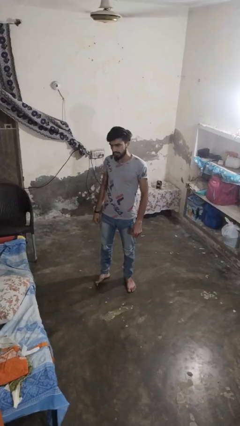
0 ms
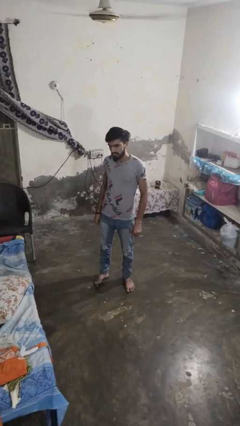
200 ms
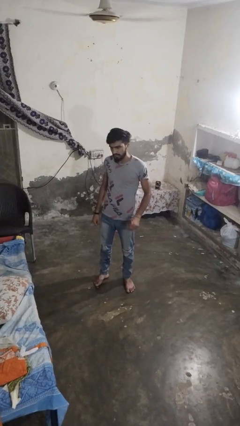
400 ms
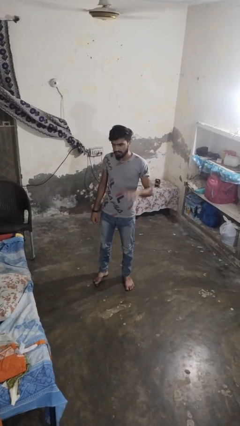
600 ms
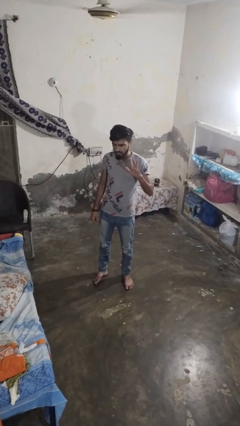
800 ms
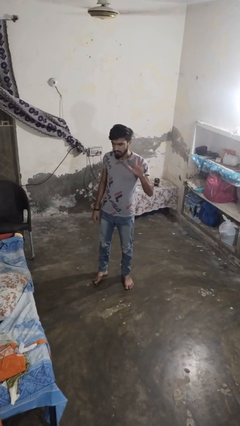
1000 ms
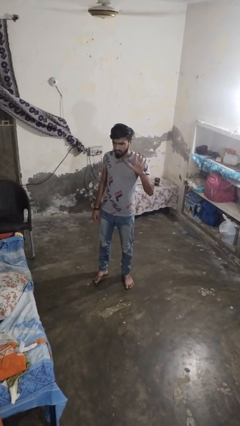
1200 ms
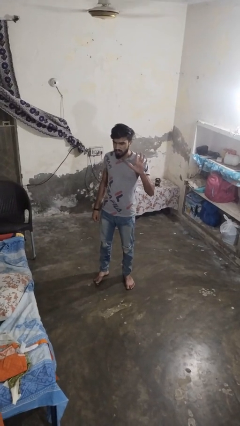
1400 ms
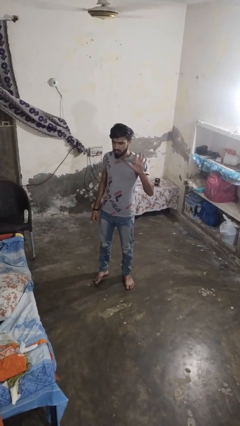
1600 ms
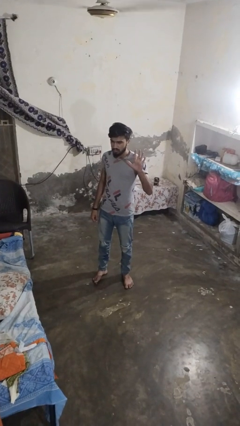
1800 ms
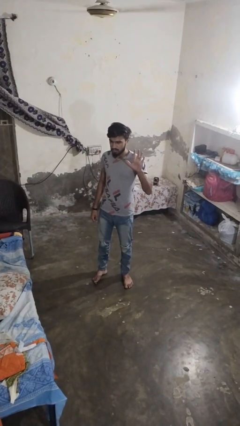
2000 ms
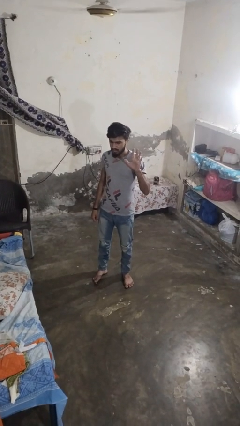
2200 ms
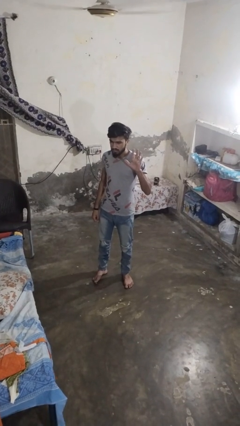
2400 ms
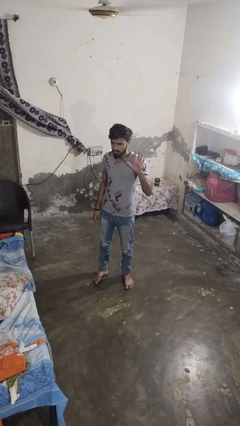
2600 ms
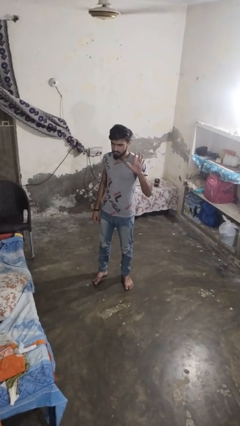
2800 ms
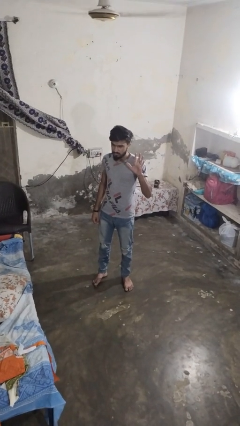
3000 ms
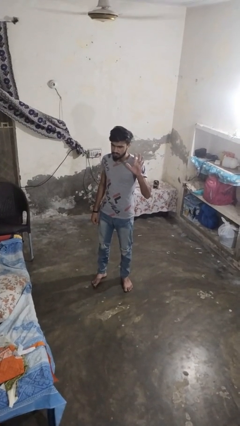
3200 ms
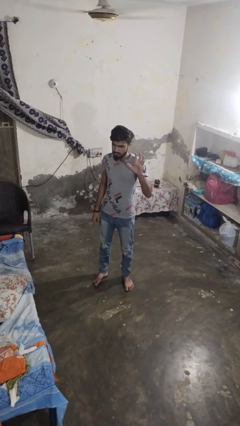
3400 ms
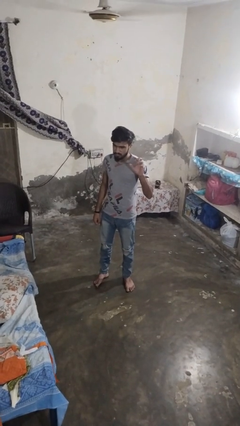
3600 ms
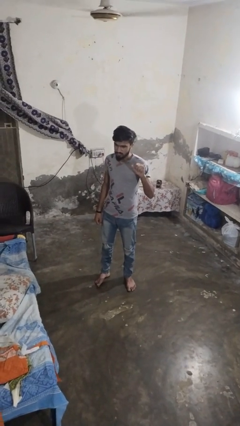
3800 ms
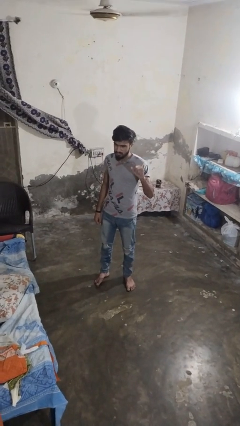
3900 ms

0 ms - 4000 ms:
person gestures number five

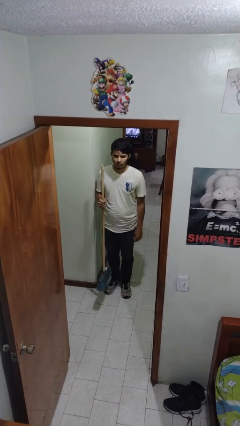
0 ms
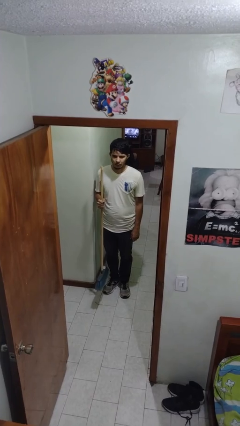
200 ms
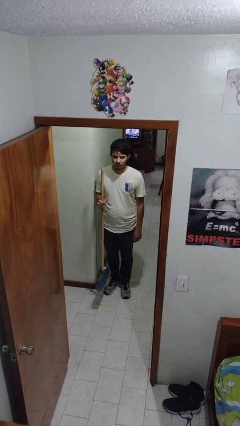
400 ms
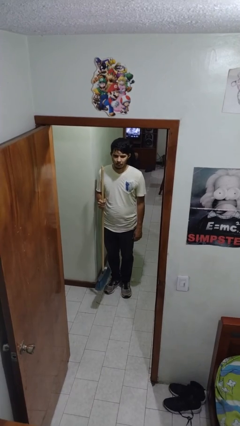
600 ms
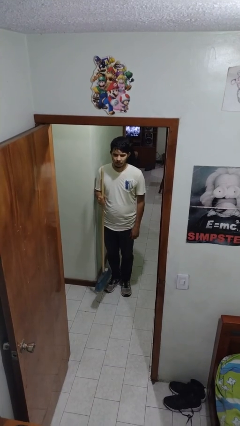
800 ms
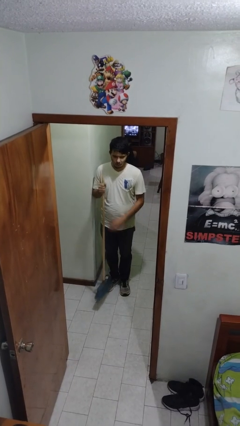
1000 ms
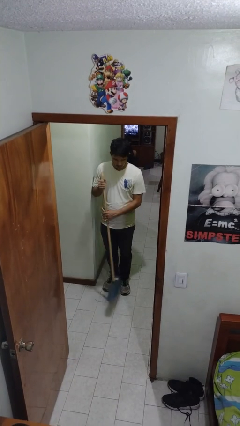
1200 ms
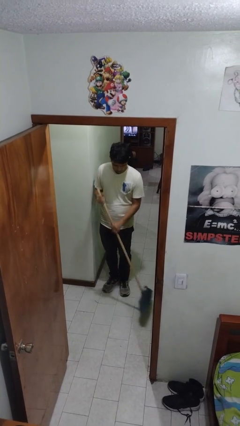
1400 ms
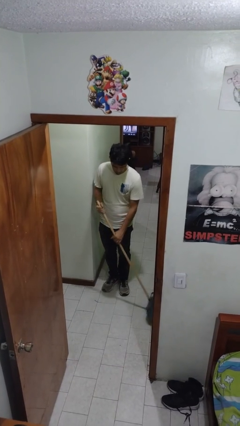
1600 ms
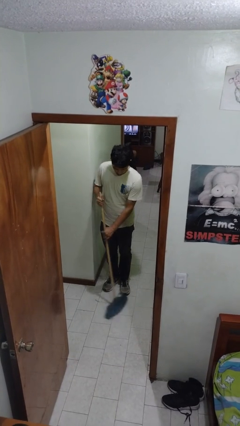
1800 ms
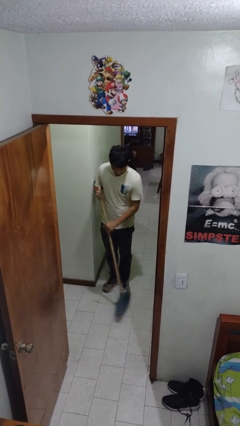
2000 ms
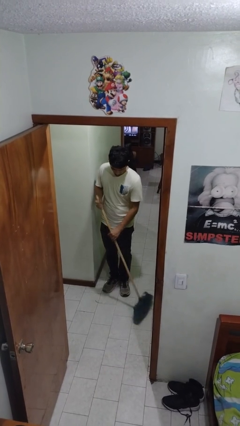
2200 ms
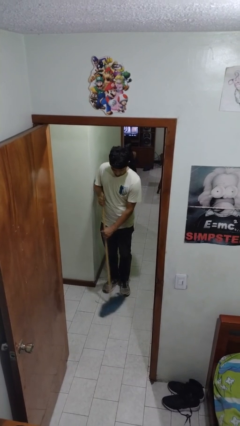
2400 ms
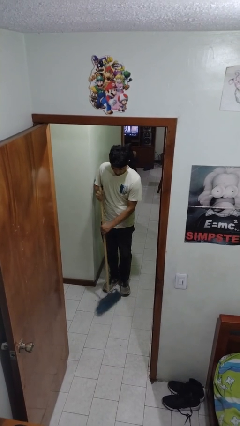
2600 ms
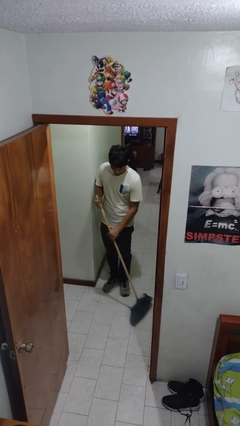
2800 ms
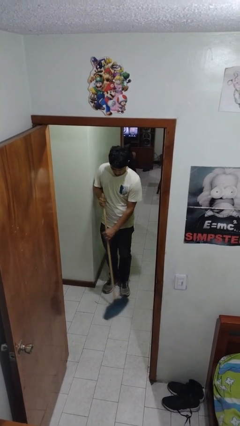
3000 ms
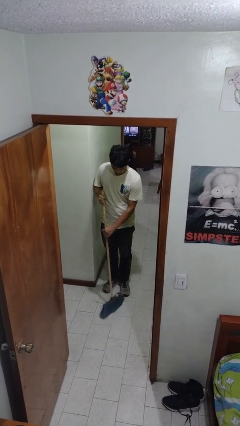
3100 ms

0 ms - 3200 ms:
person sweeps floor

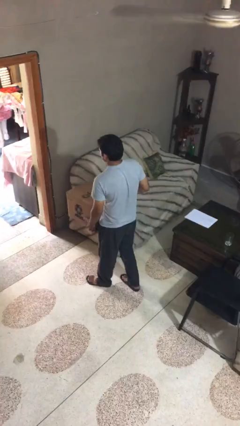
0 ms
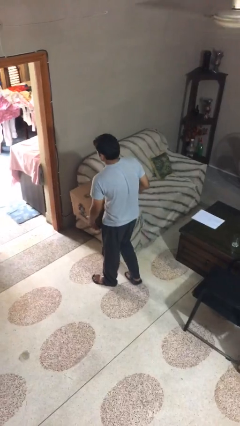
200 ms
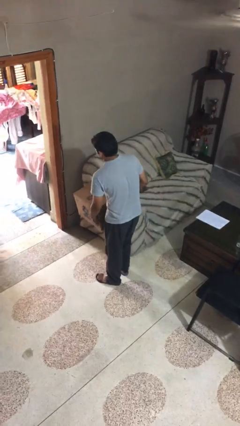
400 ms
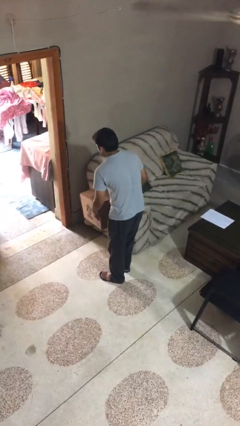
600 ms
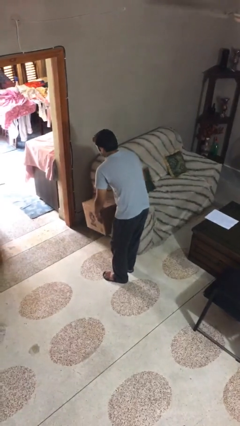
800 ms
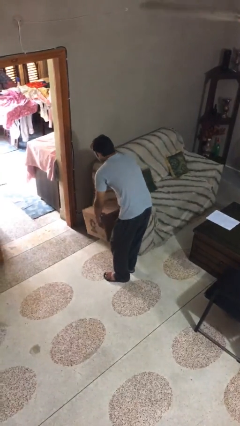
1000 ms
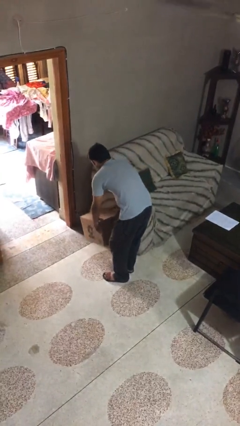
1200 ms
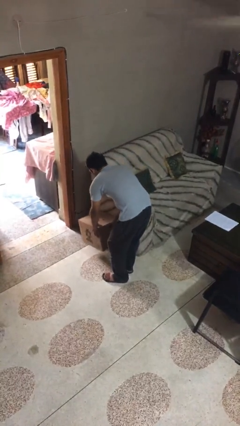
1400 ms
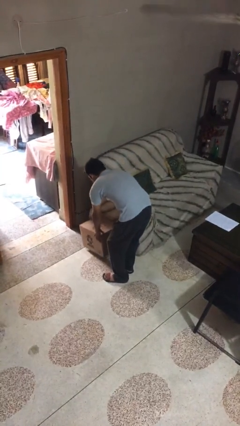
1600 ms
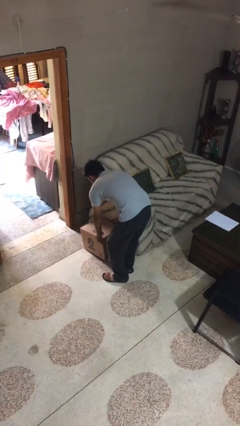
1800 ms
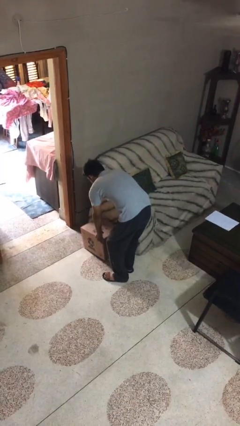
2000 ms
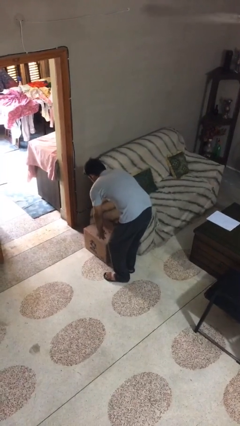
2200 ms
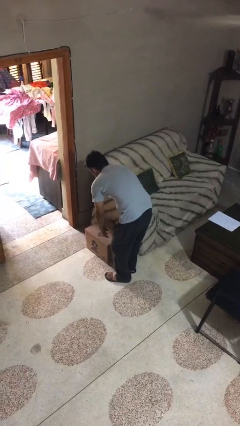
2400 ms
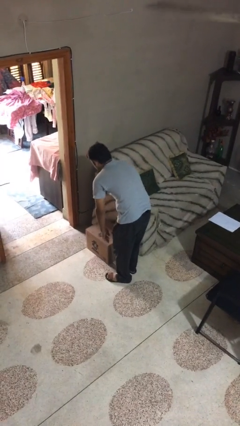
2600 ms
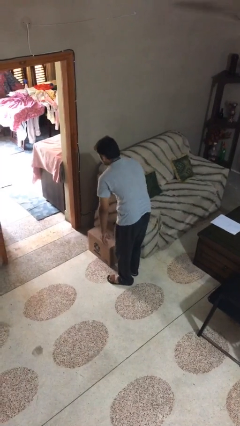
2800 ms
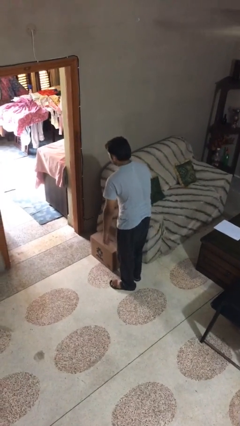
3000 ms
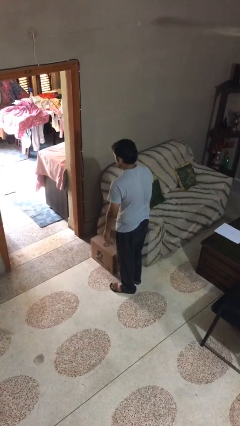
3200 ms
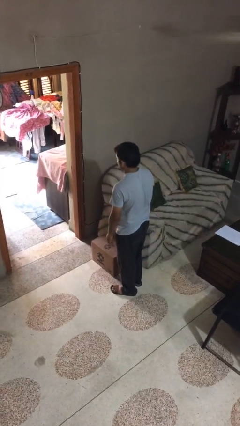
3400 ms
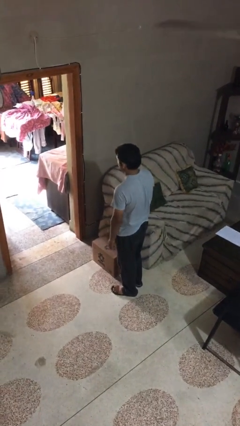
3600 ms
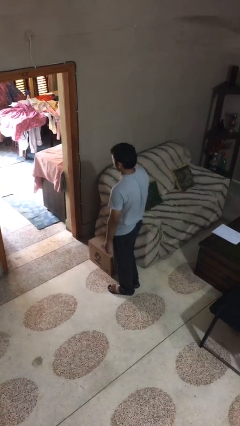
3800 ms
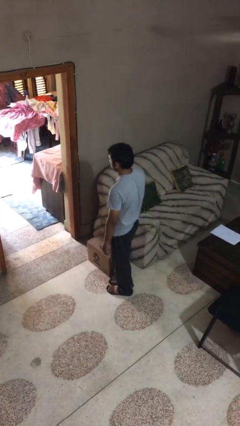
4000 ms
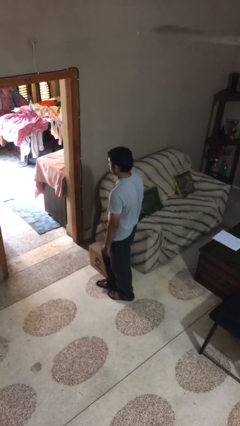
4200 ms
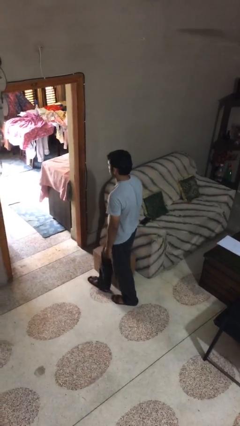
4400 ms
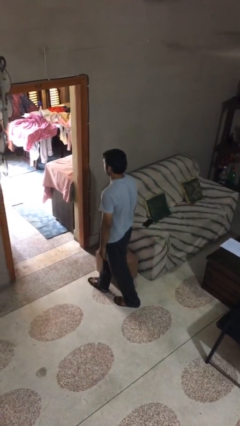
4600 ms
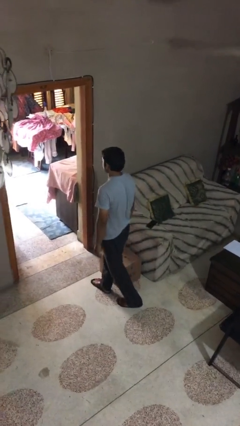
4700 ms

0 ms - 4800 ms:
person puts down object on floor

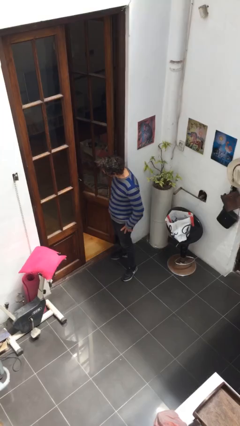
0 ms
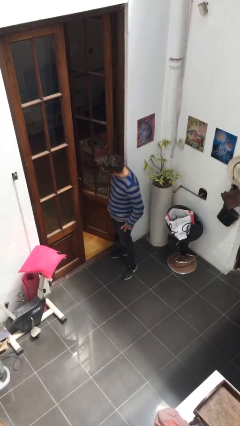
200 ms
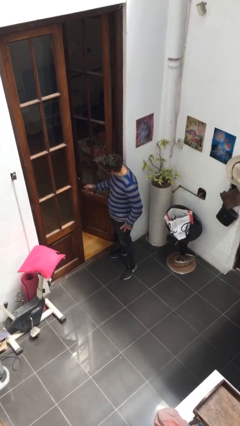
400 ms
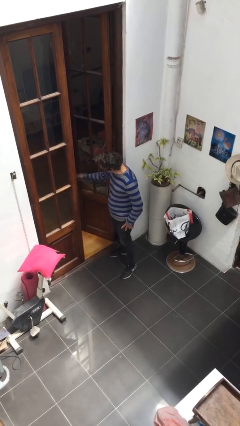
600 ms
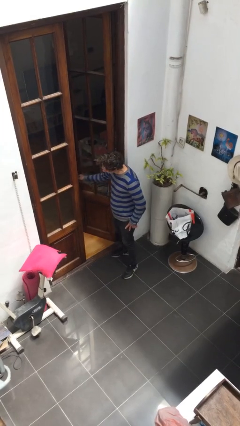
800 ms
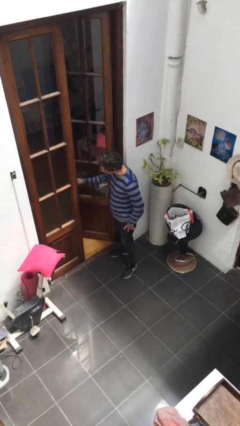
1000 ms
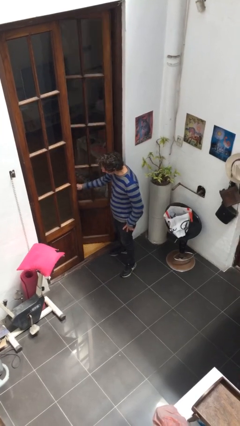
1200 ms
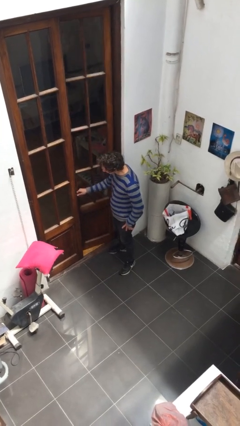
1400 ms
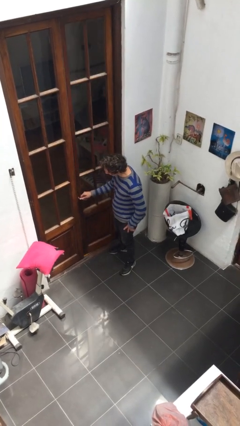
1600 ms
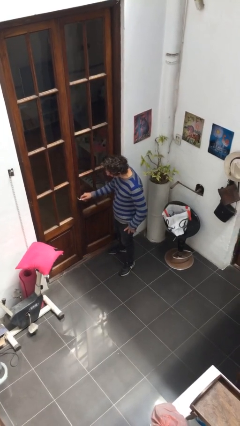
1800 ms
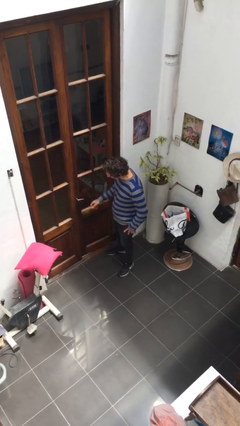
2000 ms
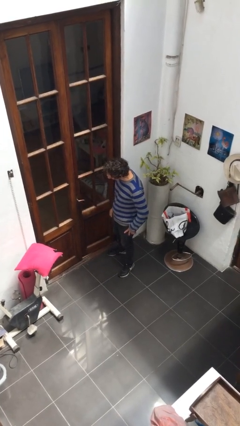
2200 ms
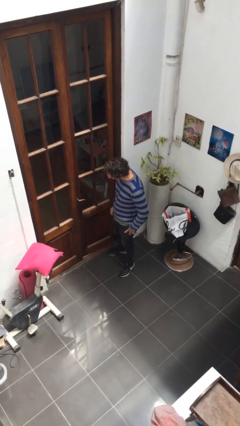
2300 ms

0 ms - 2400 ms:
person closes facility door

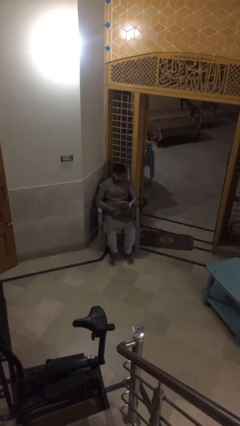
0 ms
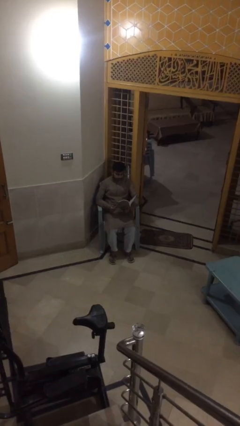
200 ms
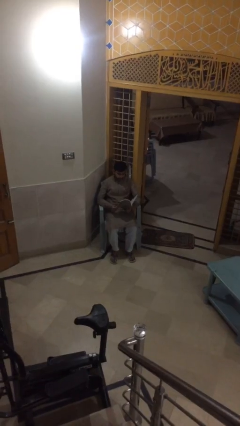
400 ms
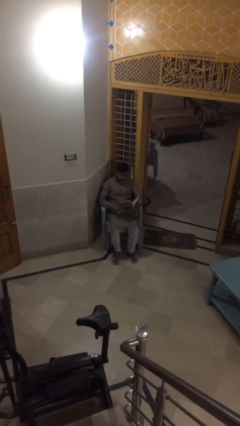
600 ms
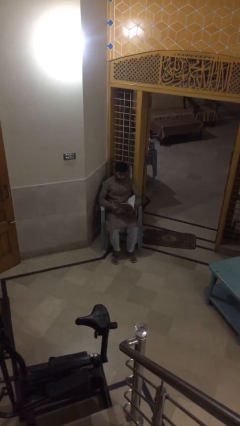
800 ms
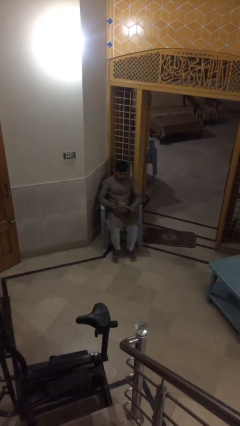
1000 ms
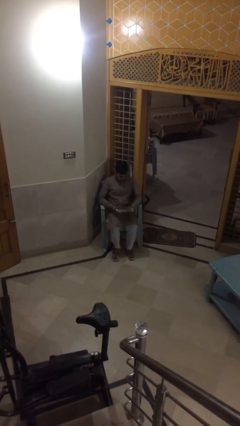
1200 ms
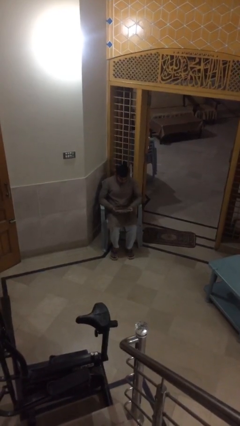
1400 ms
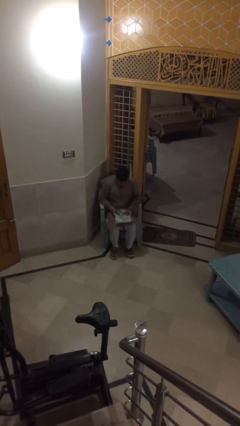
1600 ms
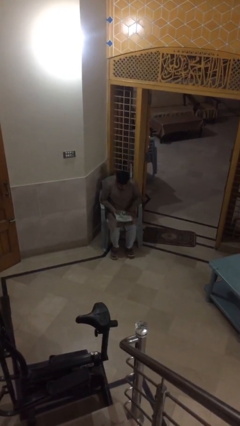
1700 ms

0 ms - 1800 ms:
person stands up

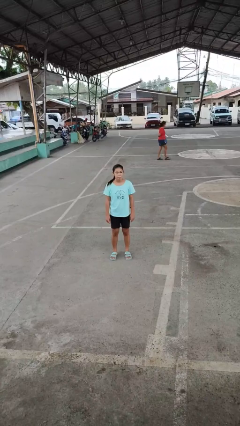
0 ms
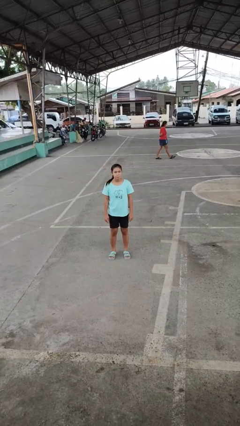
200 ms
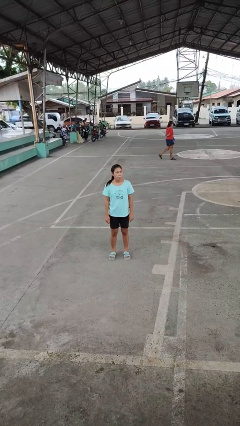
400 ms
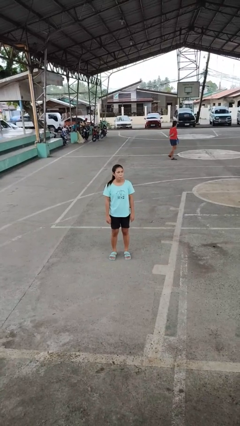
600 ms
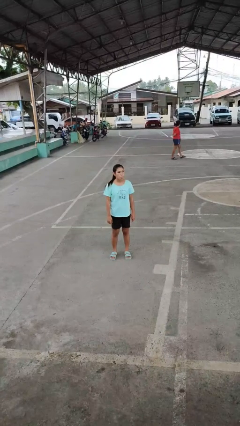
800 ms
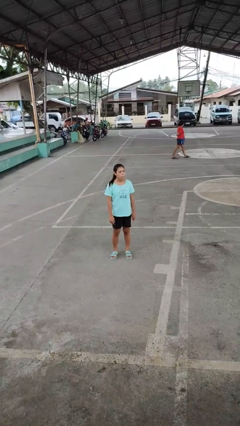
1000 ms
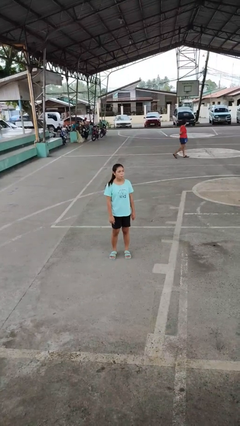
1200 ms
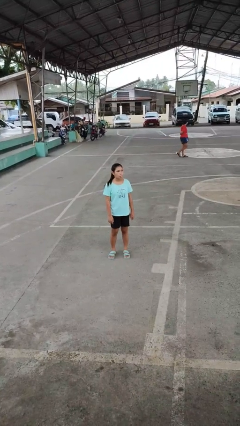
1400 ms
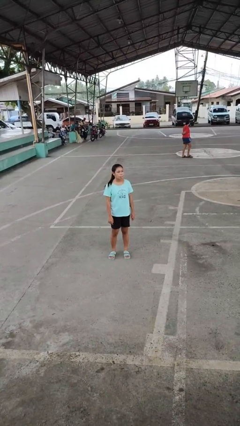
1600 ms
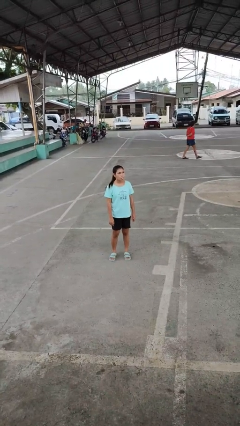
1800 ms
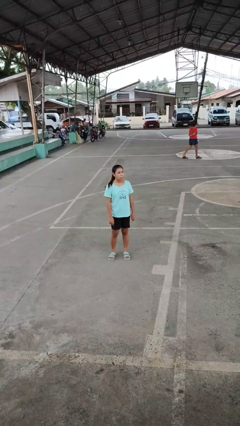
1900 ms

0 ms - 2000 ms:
person sticks out tongue
